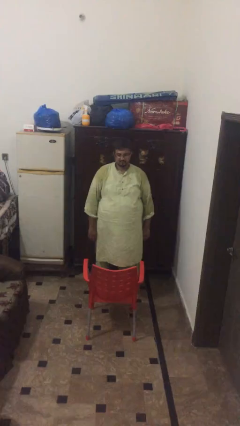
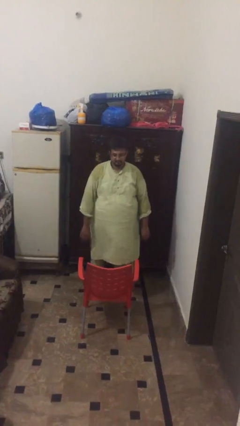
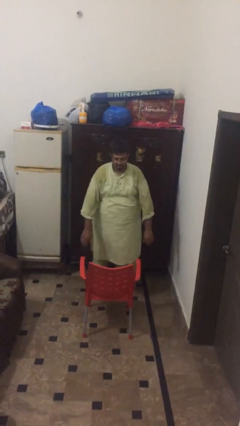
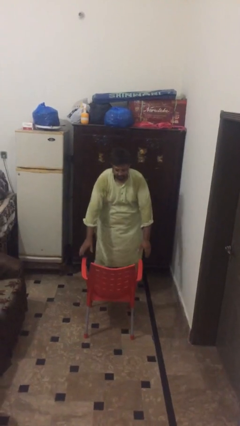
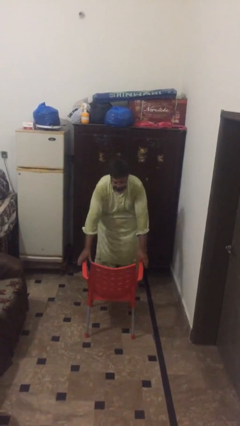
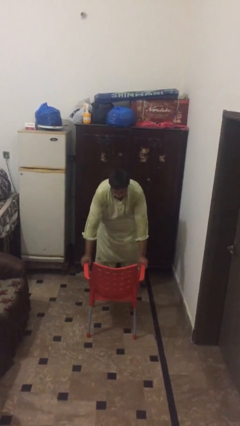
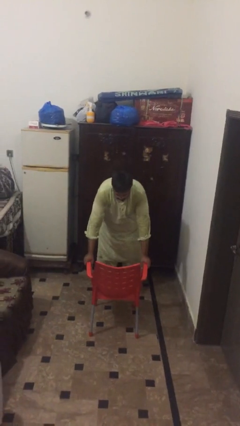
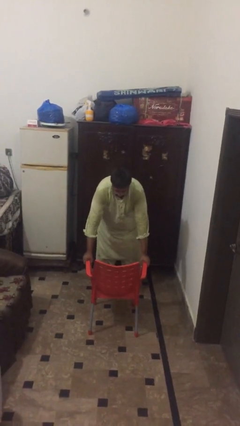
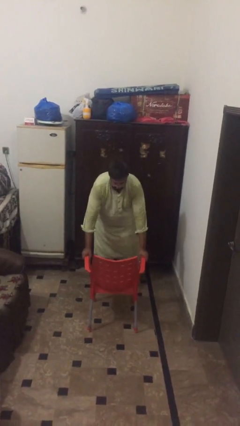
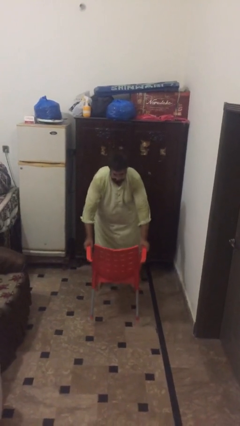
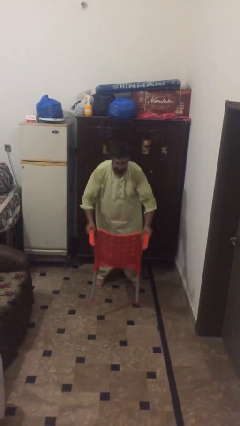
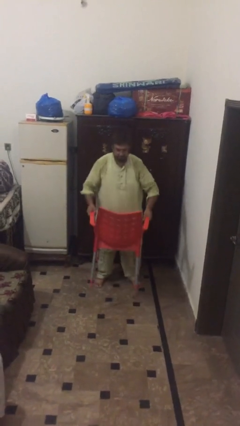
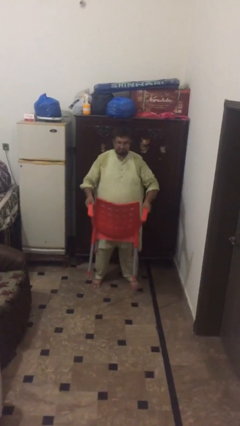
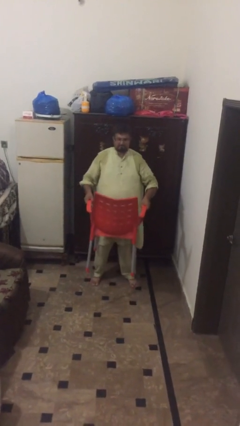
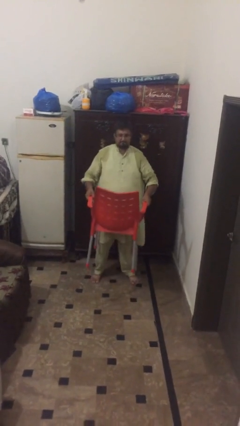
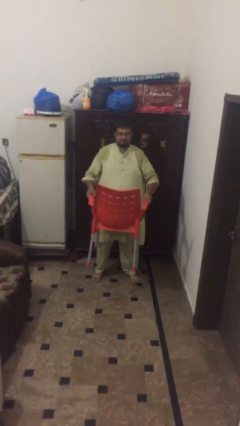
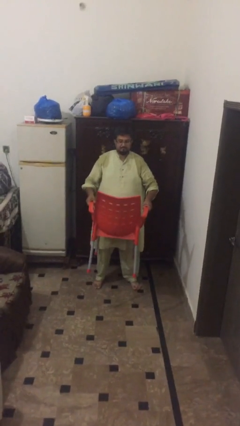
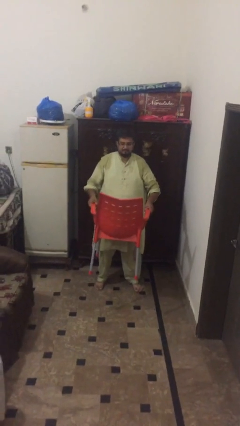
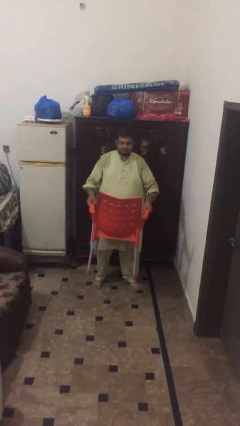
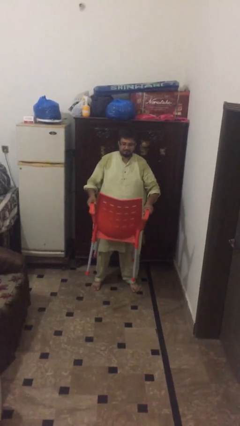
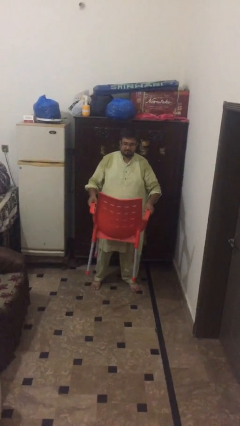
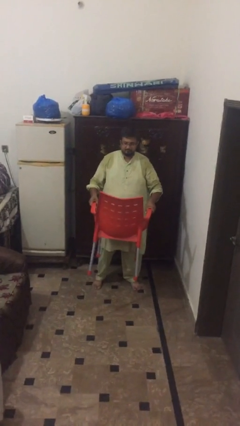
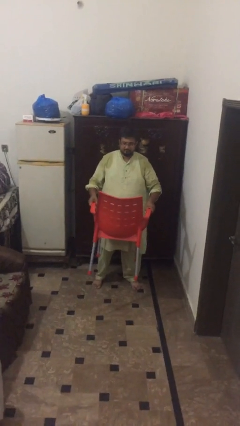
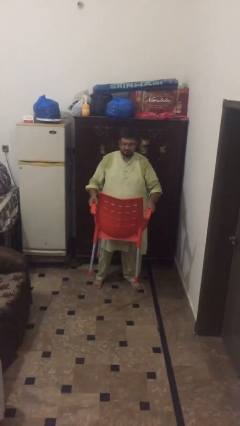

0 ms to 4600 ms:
person picks up object from floor

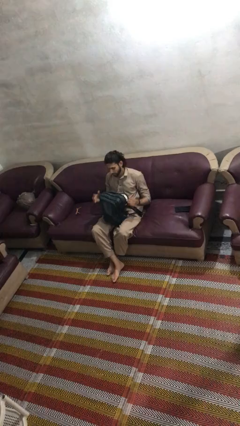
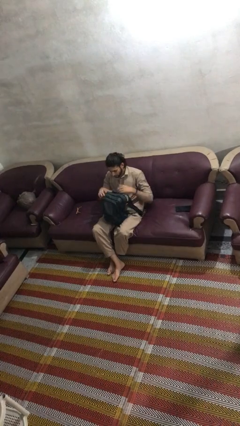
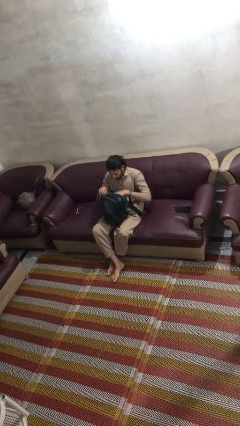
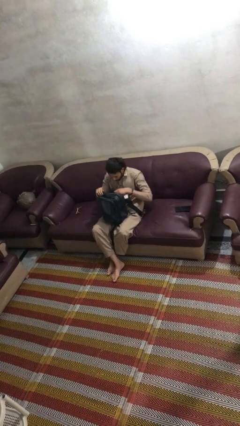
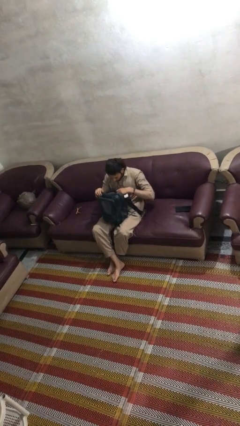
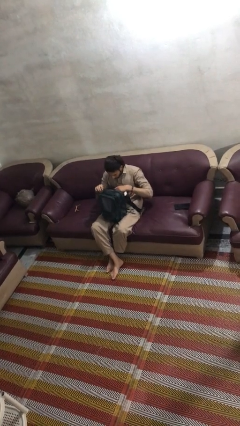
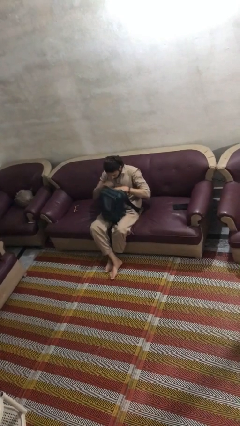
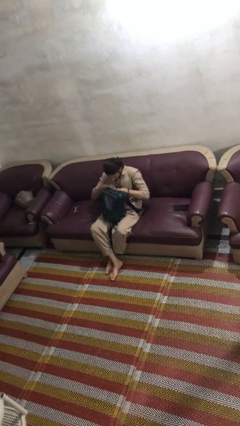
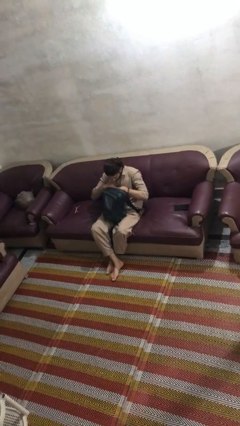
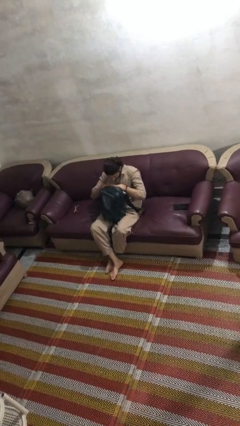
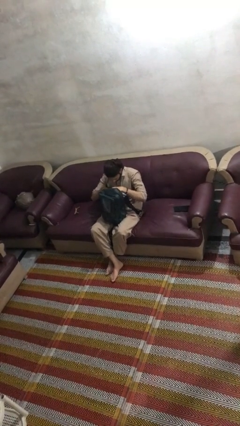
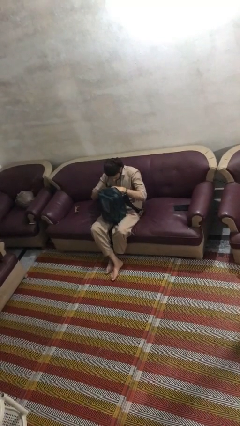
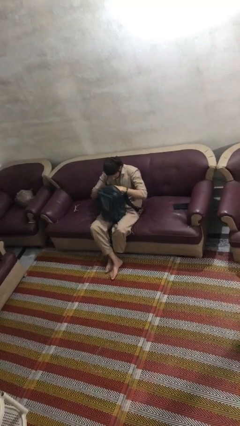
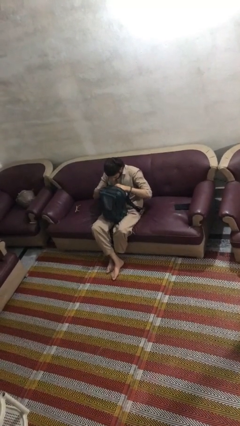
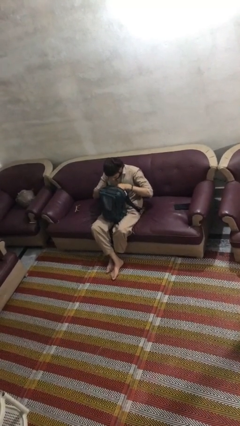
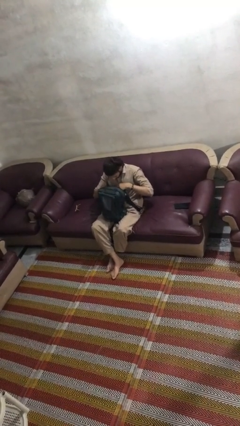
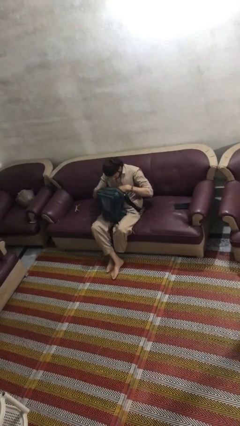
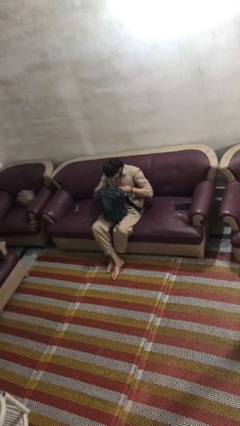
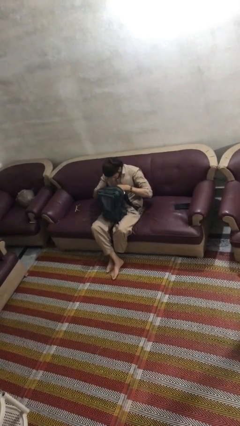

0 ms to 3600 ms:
person searches in backpack

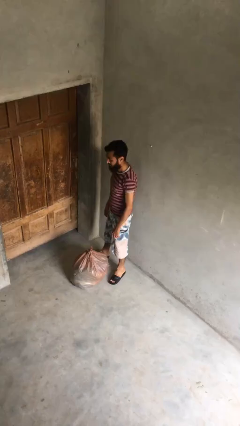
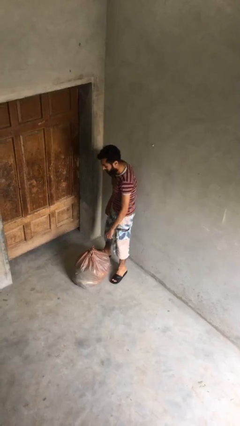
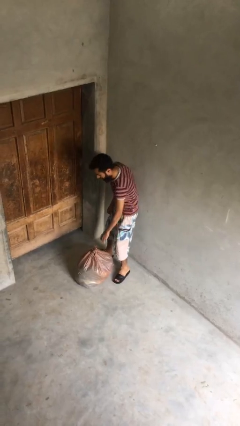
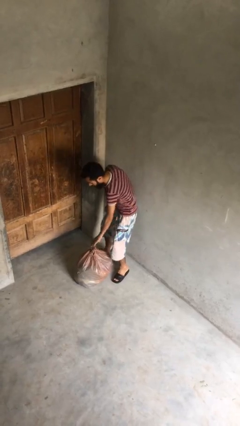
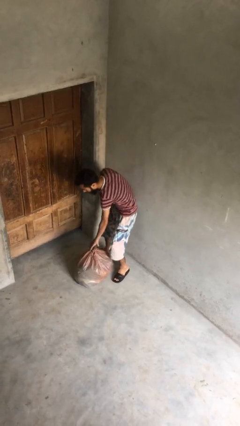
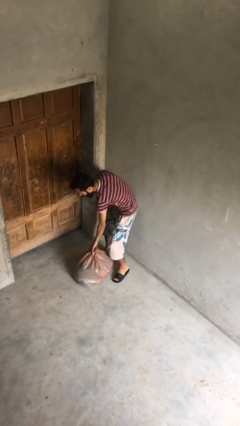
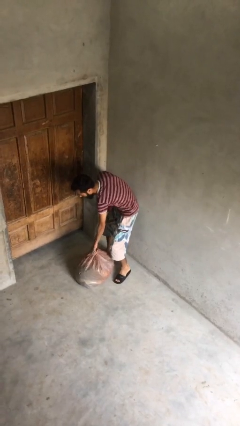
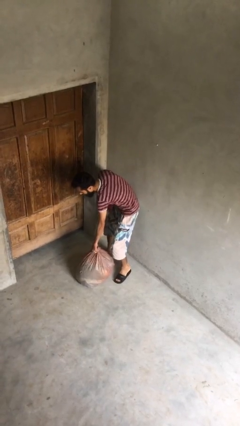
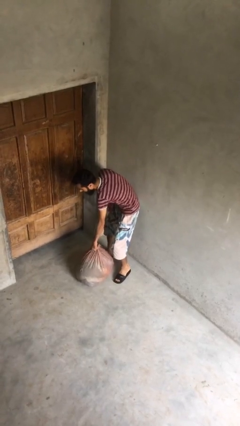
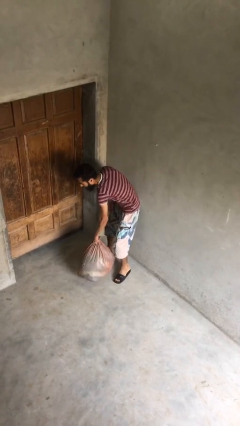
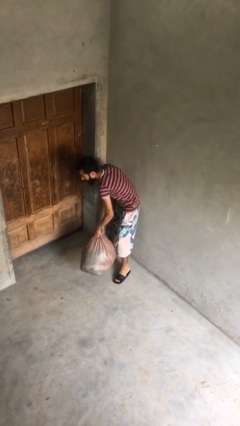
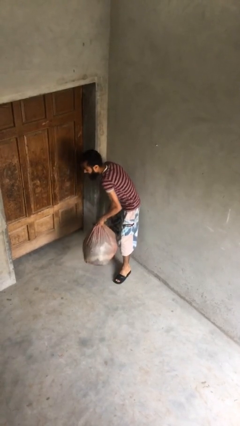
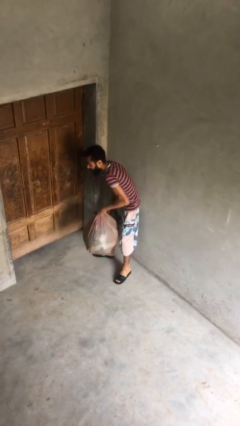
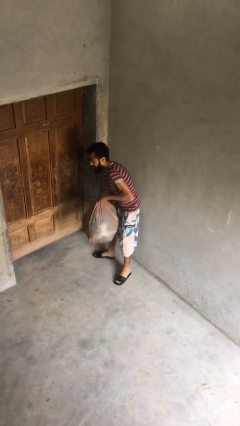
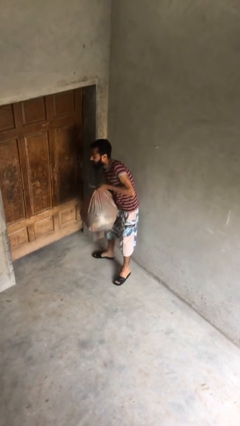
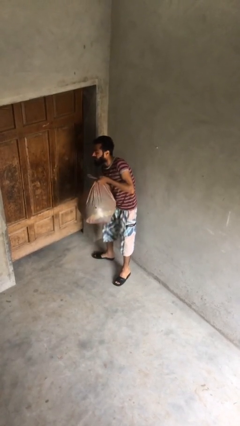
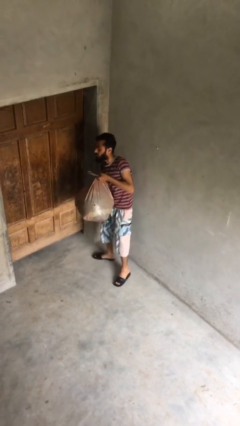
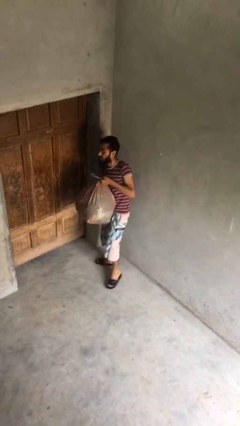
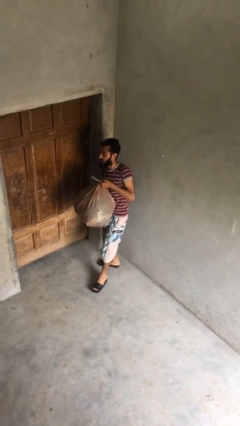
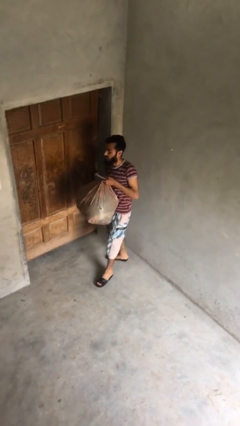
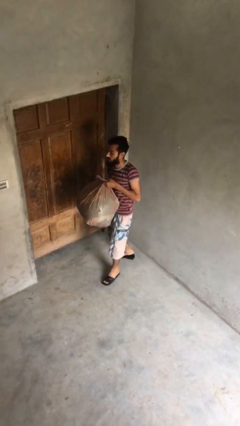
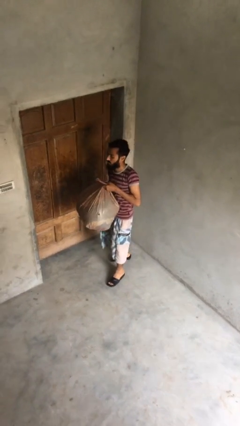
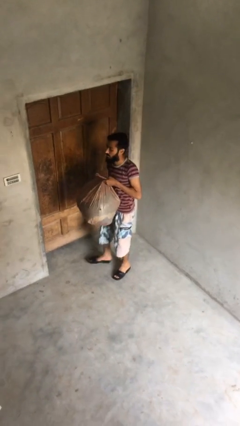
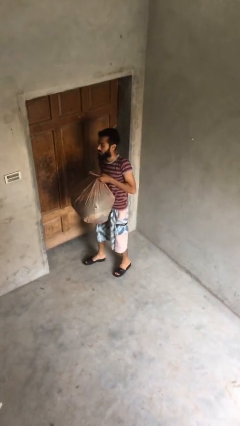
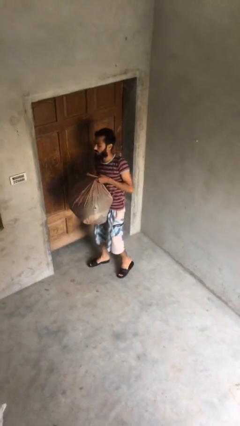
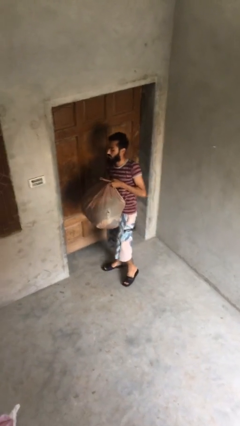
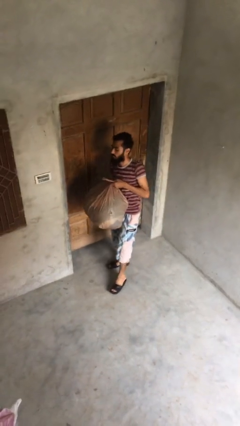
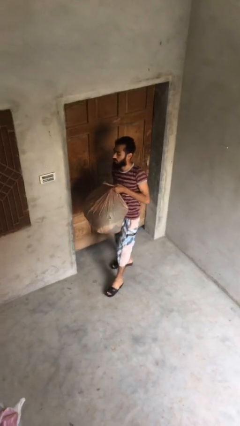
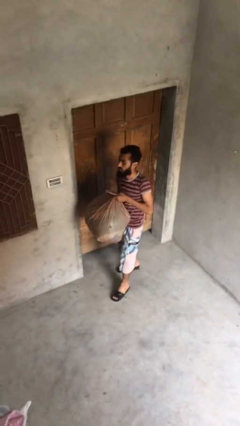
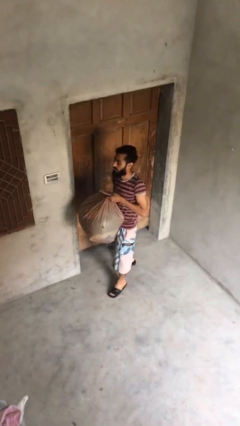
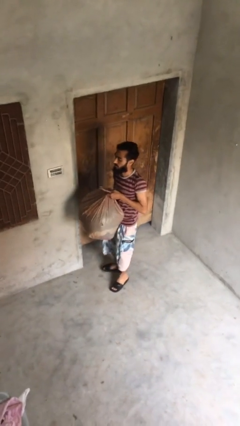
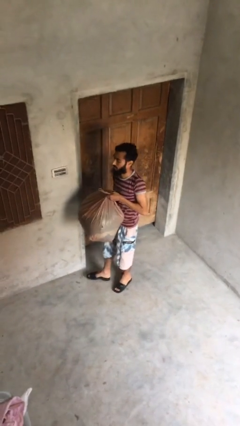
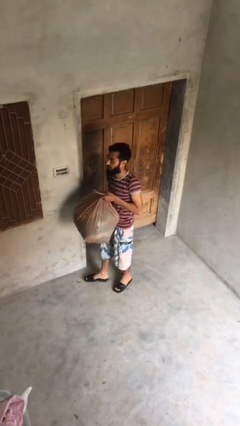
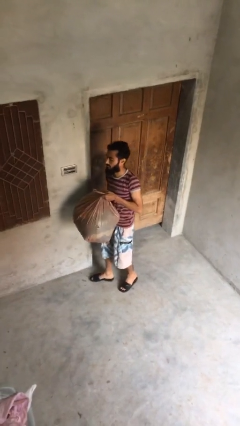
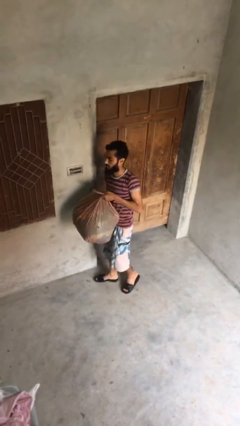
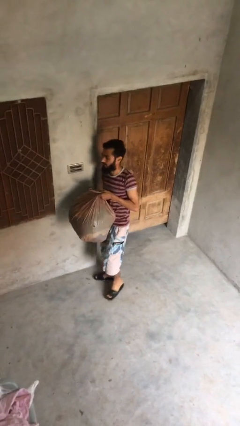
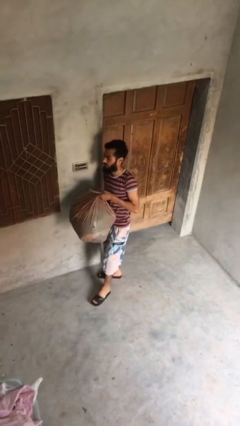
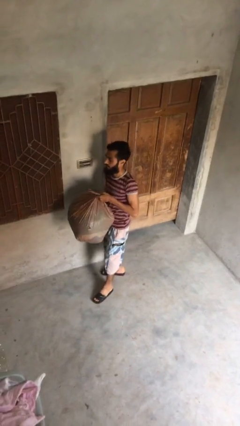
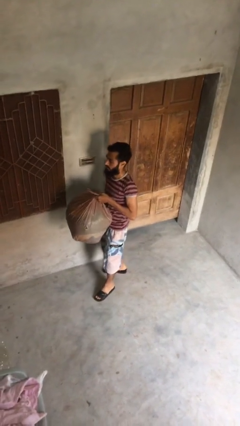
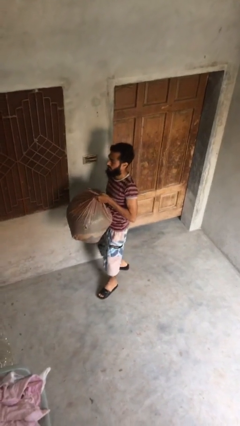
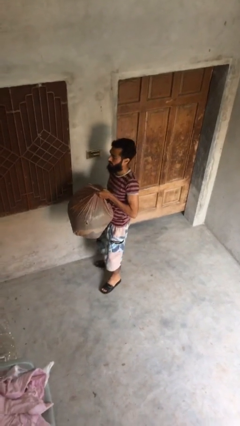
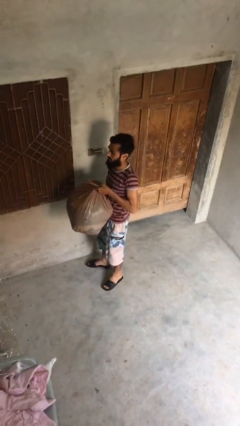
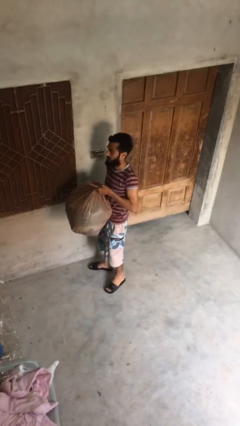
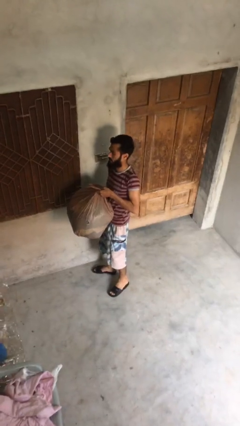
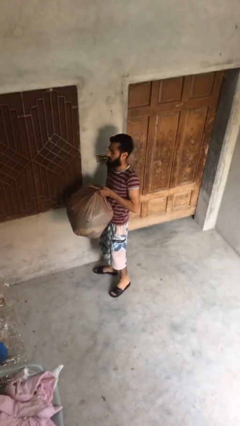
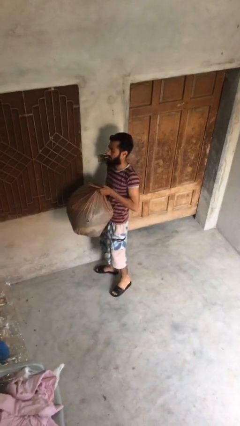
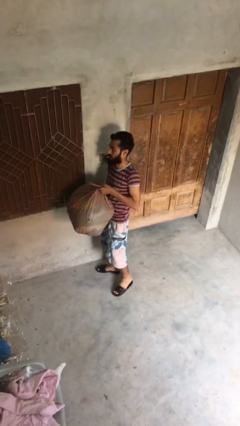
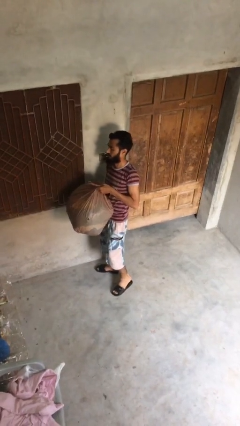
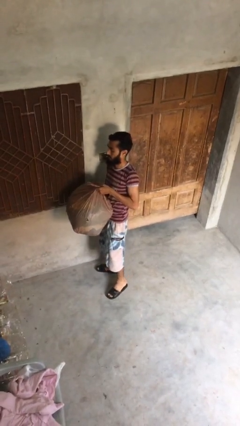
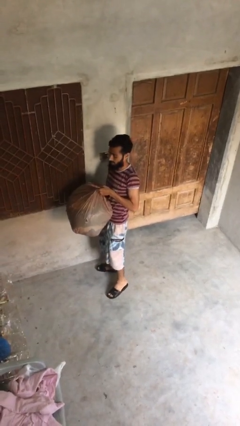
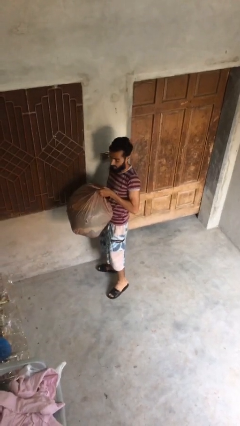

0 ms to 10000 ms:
person carries heavy object
